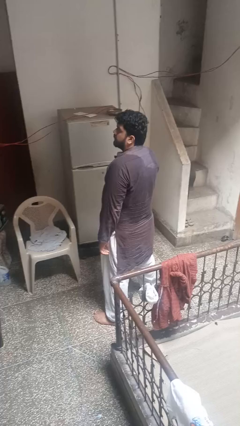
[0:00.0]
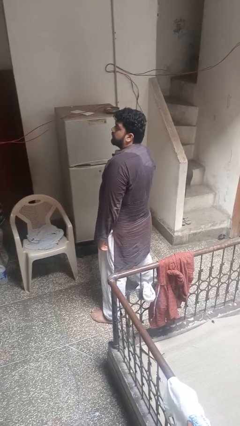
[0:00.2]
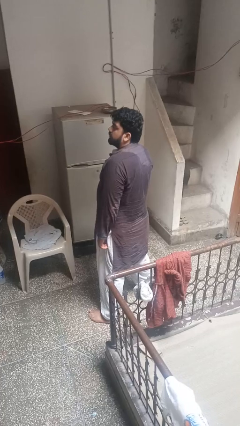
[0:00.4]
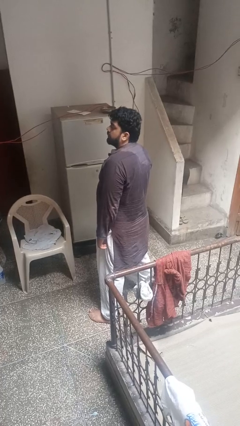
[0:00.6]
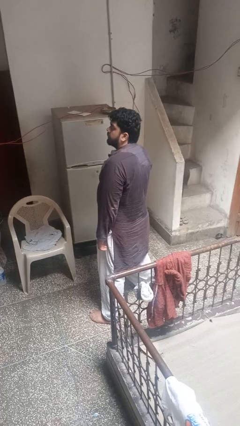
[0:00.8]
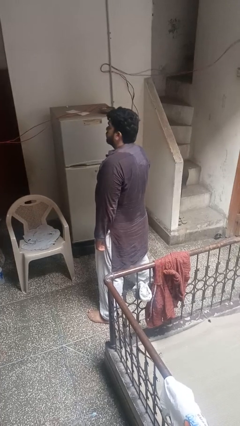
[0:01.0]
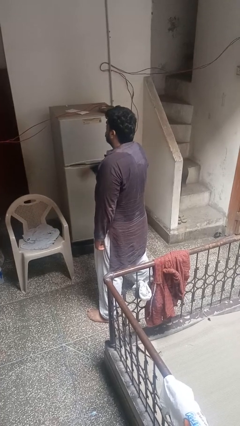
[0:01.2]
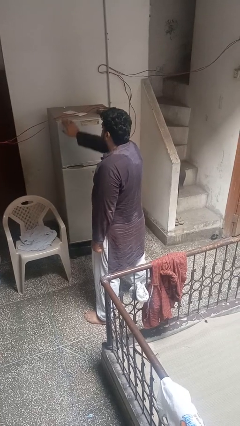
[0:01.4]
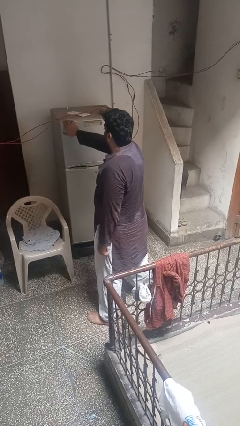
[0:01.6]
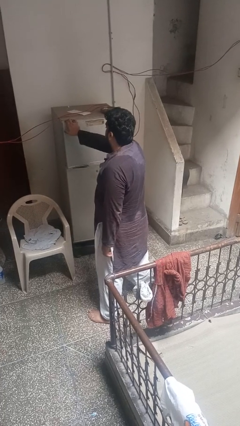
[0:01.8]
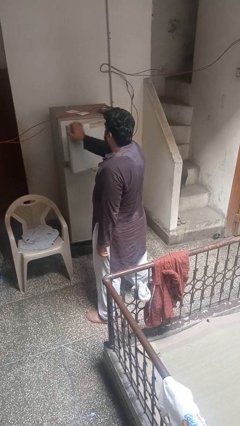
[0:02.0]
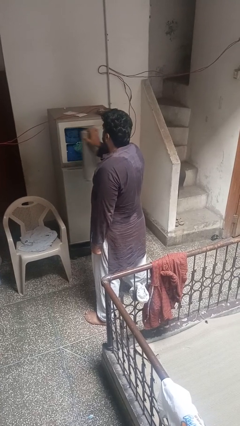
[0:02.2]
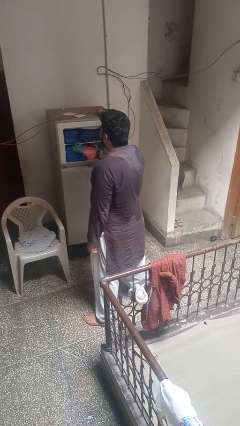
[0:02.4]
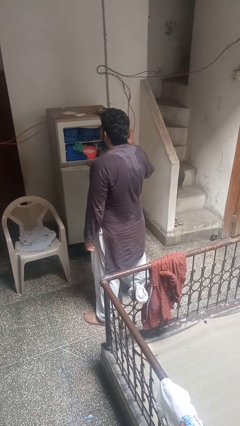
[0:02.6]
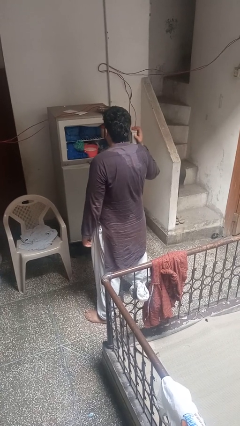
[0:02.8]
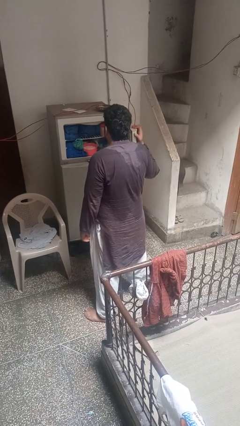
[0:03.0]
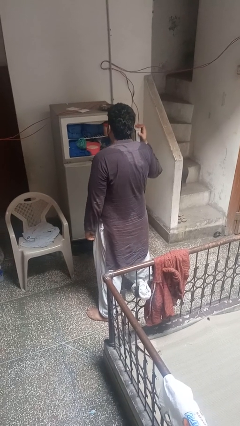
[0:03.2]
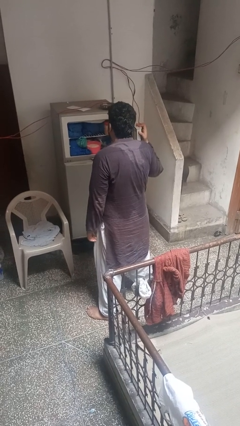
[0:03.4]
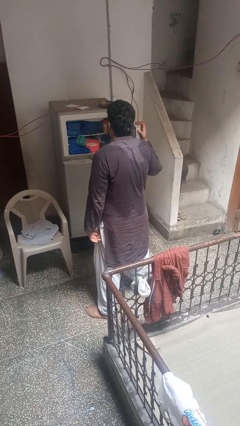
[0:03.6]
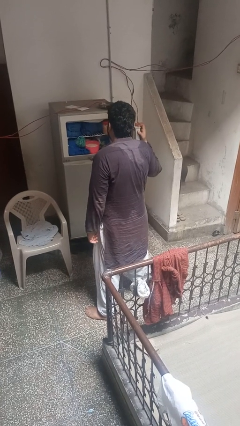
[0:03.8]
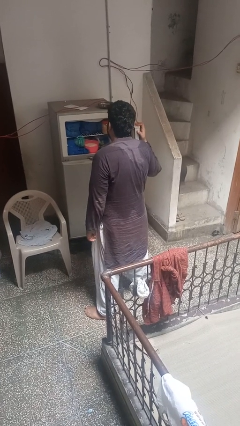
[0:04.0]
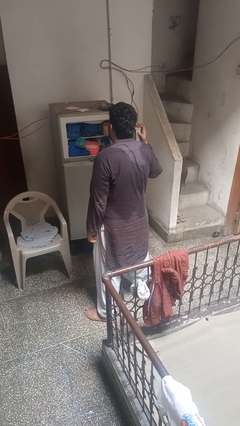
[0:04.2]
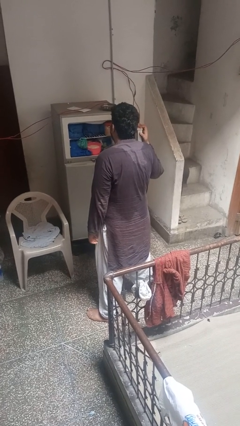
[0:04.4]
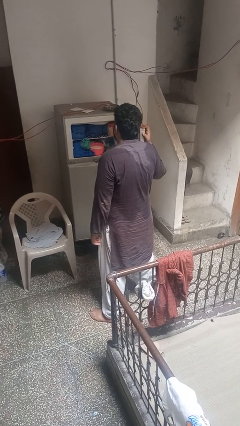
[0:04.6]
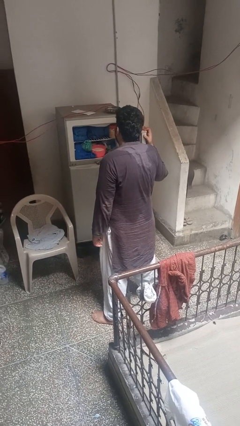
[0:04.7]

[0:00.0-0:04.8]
person opens refrigerator

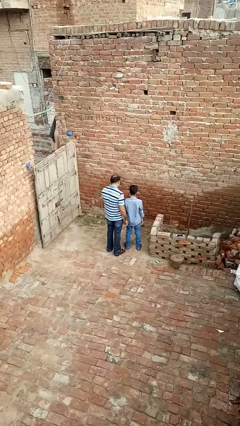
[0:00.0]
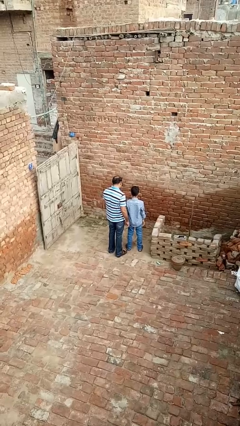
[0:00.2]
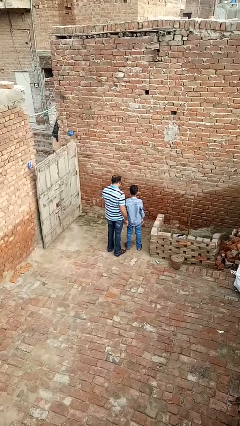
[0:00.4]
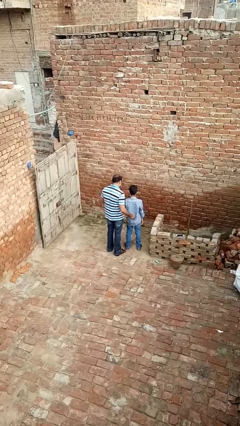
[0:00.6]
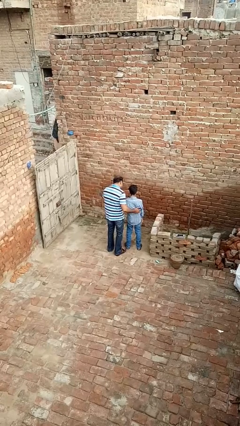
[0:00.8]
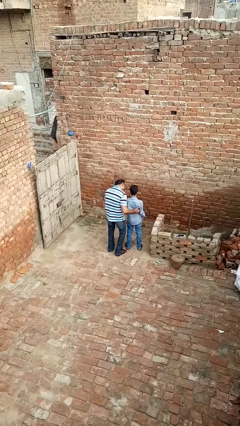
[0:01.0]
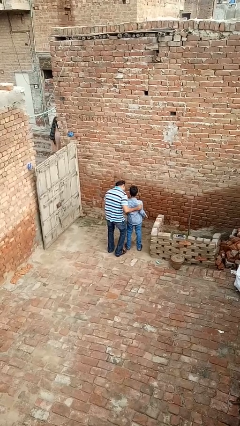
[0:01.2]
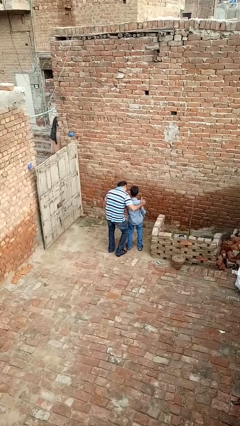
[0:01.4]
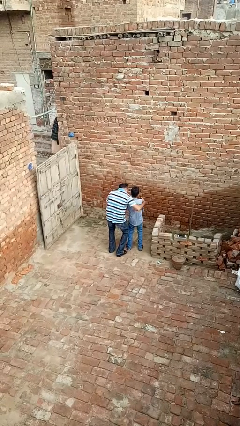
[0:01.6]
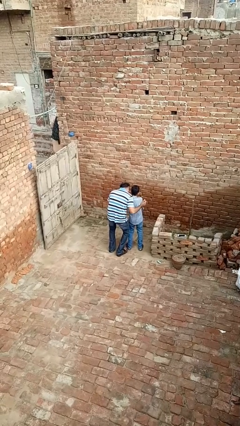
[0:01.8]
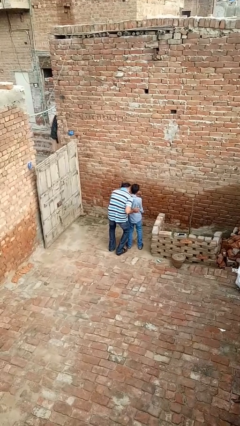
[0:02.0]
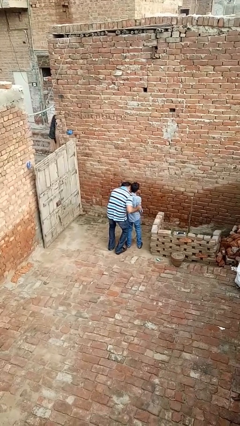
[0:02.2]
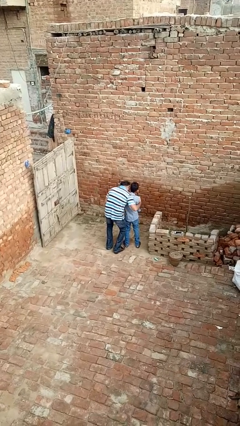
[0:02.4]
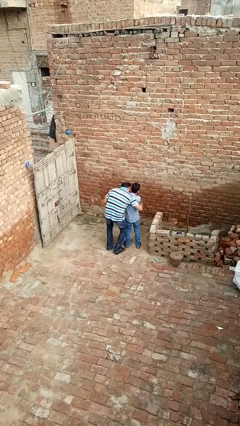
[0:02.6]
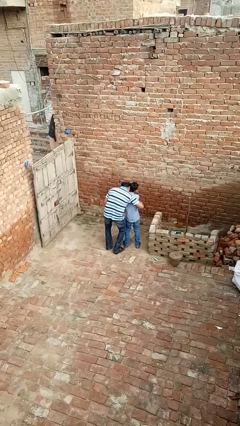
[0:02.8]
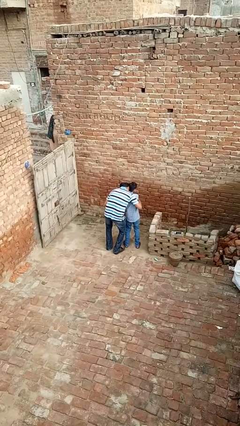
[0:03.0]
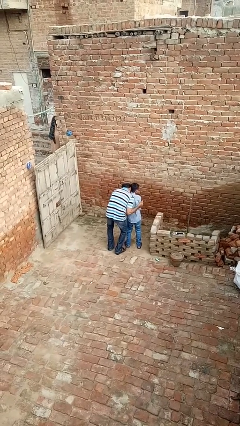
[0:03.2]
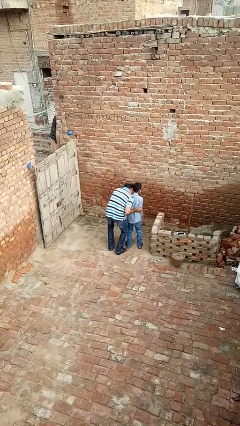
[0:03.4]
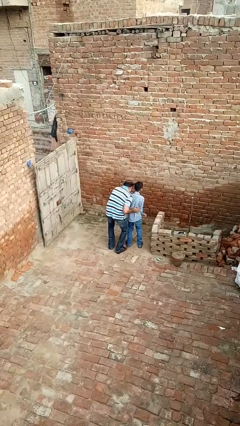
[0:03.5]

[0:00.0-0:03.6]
person tickles person

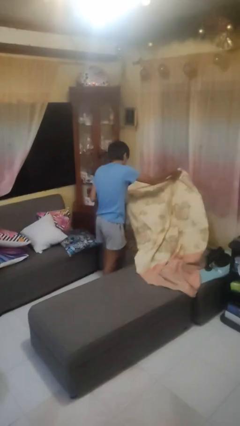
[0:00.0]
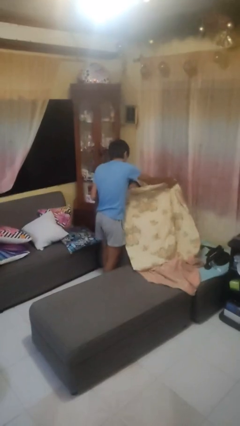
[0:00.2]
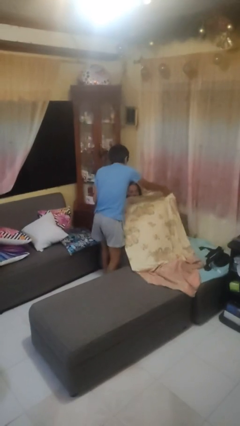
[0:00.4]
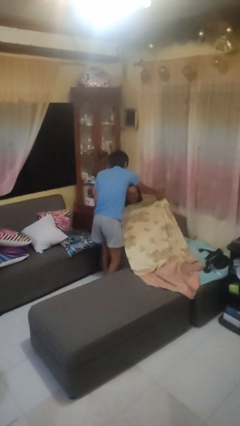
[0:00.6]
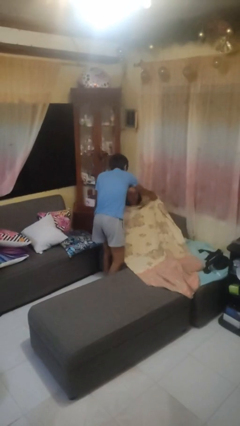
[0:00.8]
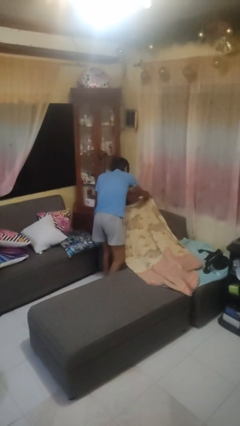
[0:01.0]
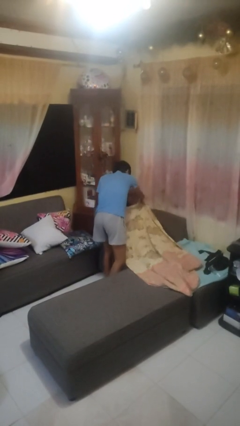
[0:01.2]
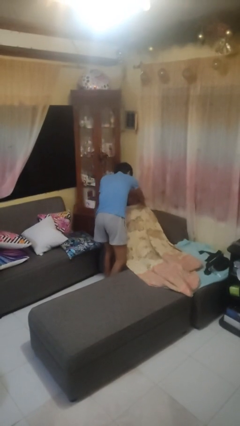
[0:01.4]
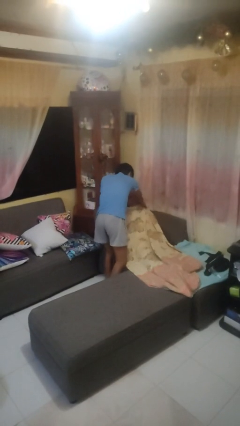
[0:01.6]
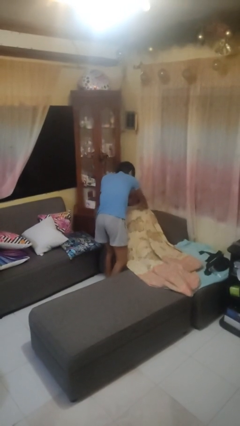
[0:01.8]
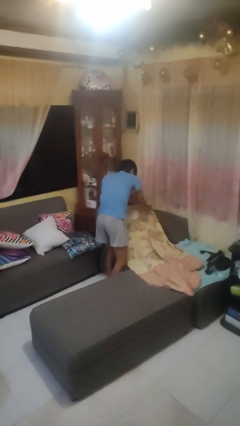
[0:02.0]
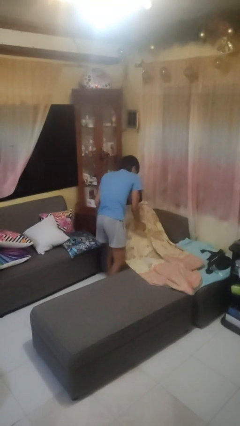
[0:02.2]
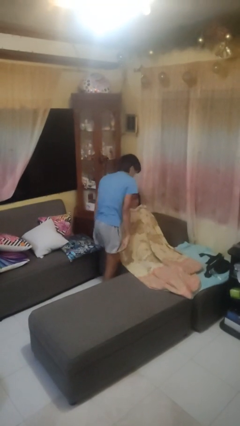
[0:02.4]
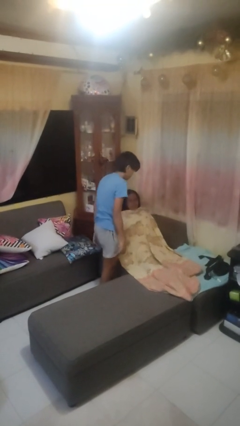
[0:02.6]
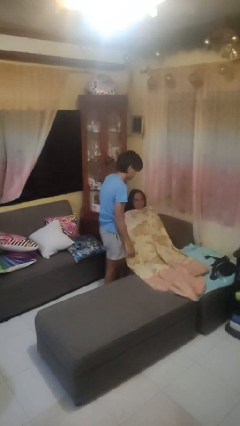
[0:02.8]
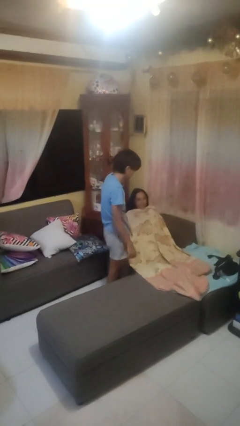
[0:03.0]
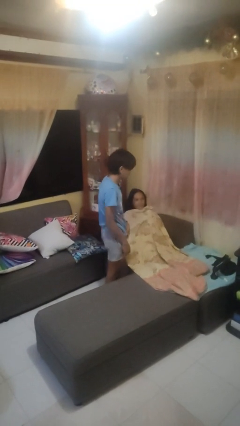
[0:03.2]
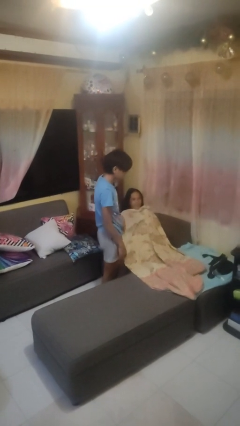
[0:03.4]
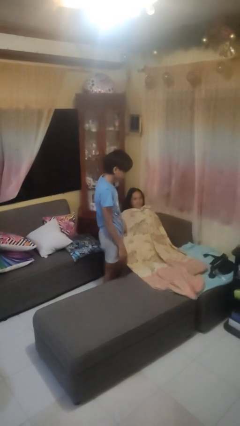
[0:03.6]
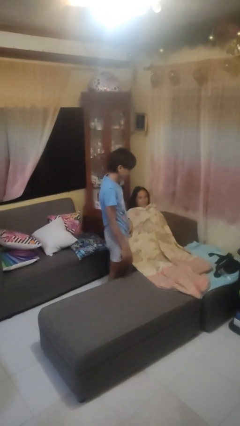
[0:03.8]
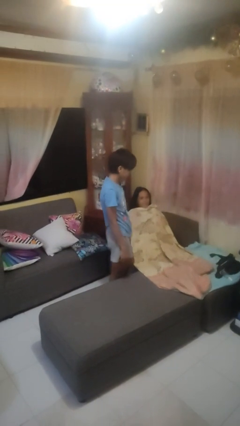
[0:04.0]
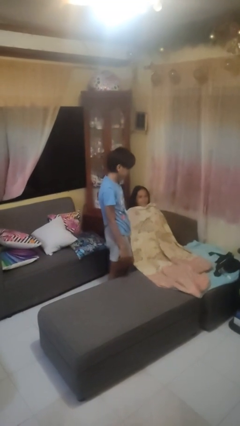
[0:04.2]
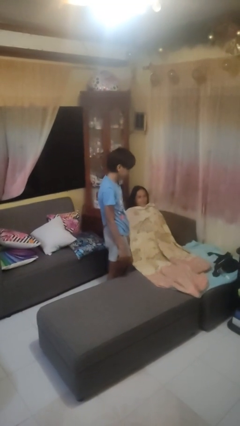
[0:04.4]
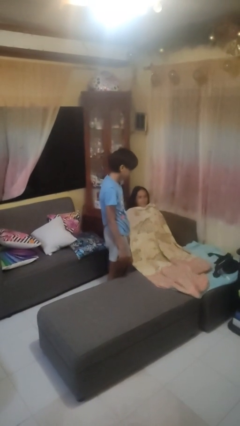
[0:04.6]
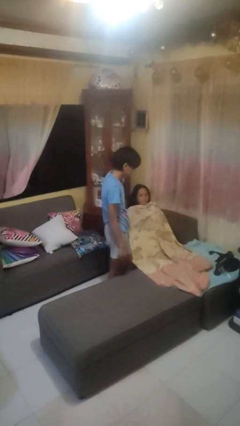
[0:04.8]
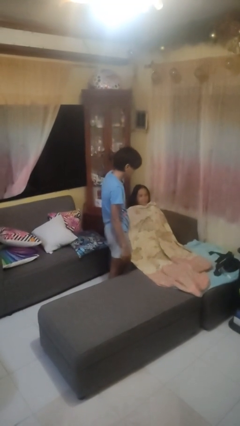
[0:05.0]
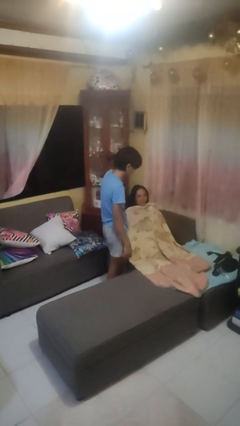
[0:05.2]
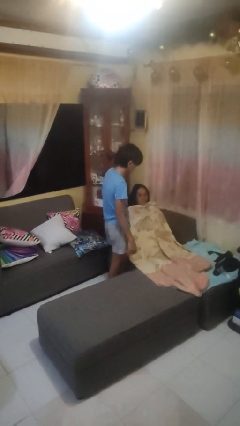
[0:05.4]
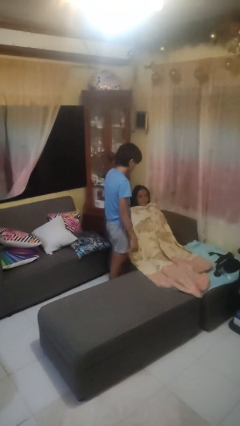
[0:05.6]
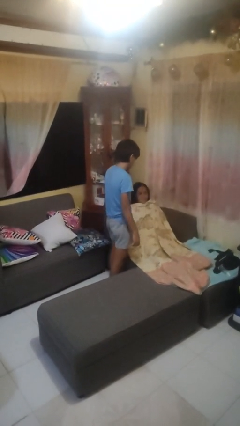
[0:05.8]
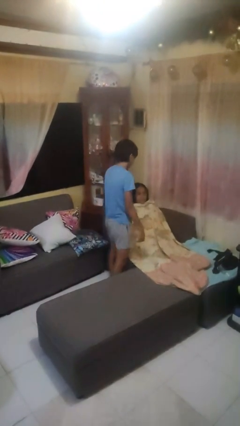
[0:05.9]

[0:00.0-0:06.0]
person covers friend with blanket

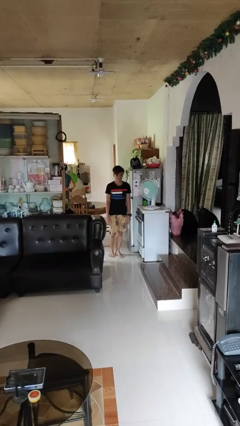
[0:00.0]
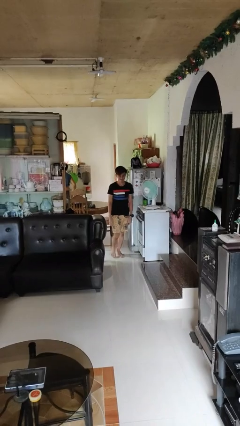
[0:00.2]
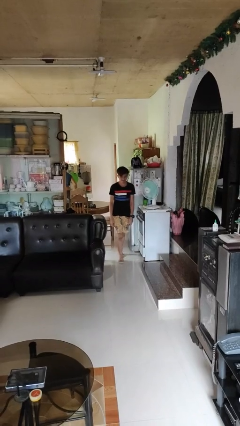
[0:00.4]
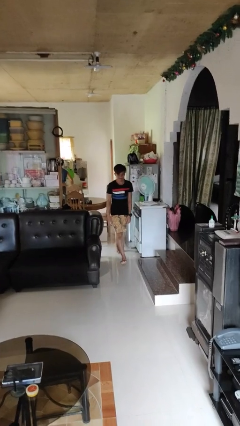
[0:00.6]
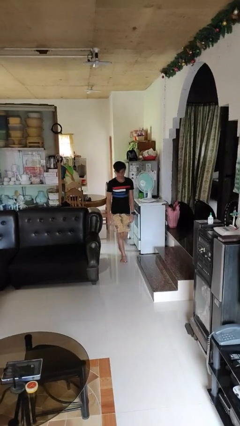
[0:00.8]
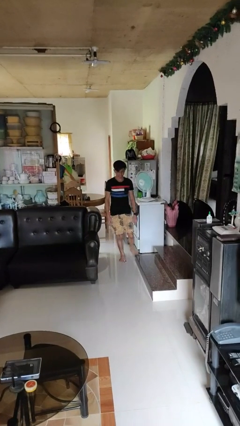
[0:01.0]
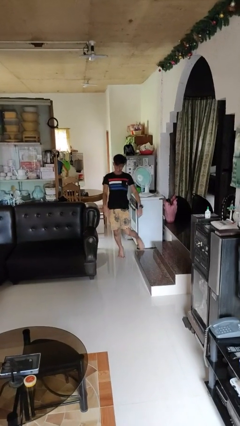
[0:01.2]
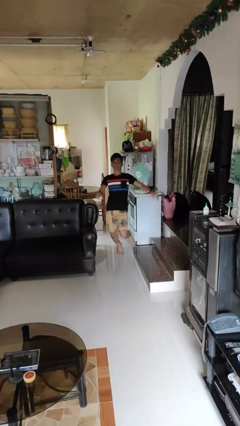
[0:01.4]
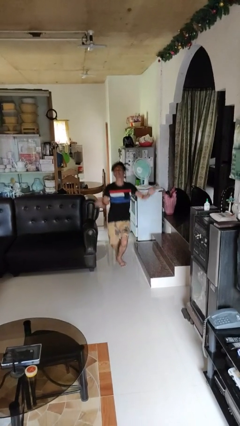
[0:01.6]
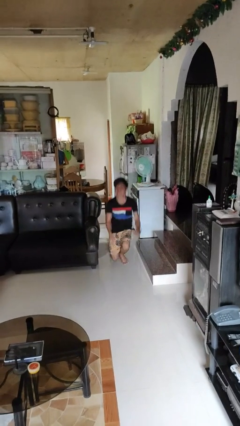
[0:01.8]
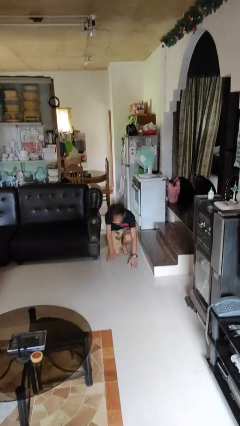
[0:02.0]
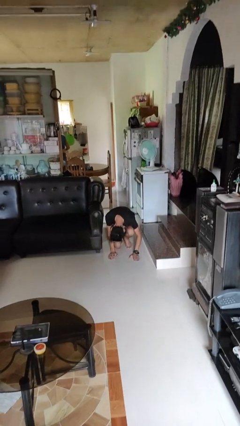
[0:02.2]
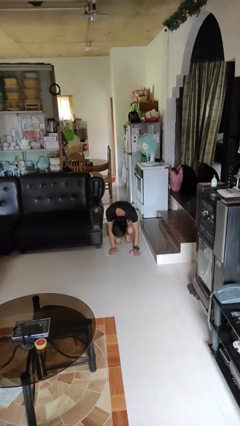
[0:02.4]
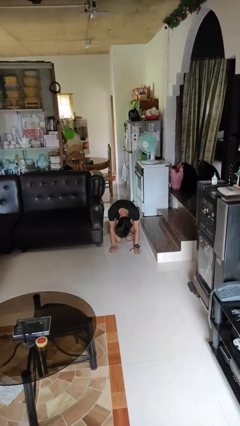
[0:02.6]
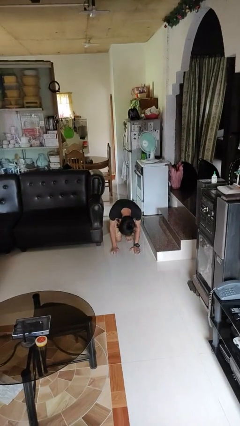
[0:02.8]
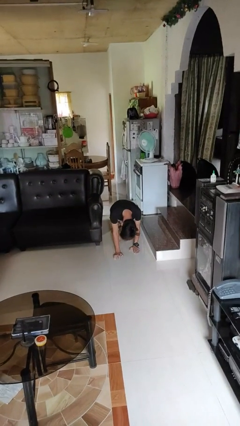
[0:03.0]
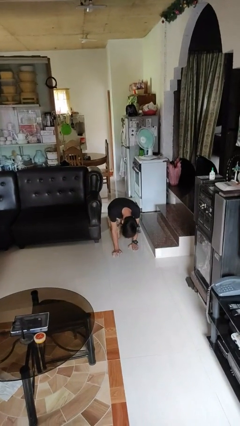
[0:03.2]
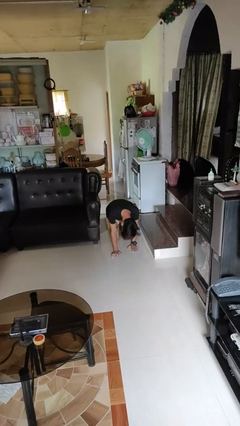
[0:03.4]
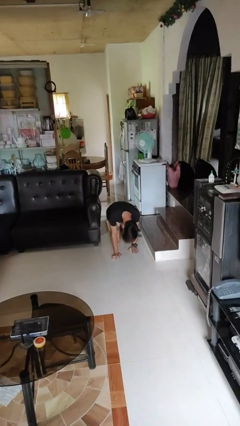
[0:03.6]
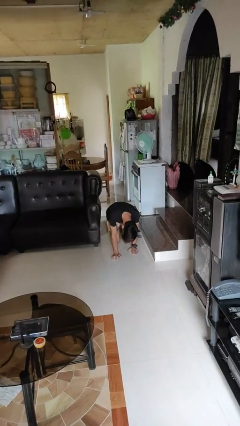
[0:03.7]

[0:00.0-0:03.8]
person trips on object on floor
